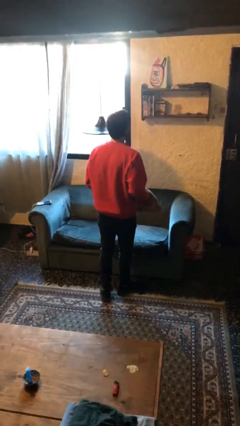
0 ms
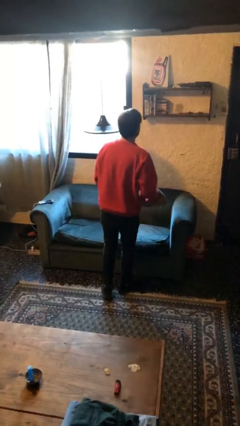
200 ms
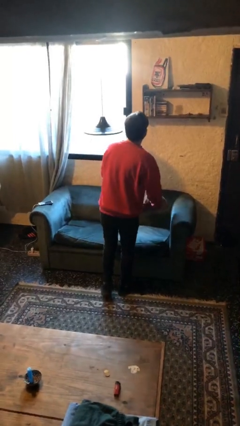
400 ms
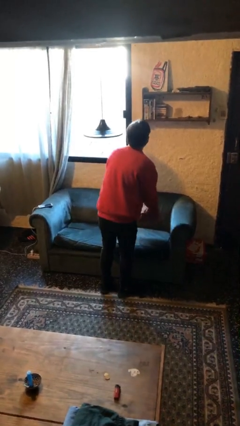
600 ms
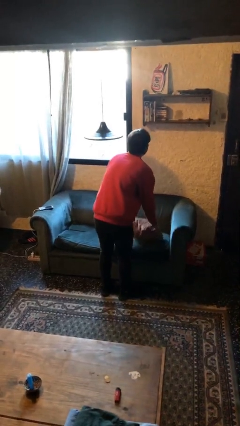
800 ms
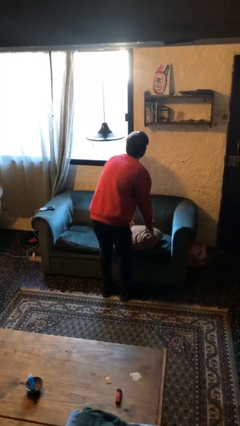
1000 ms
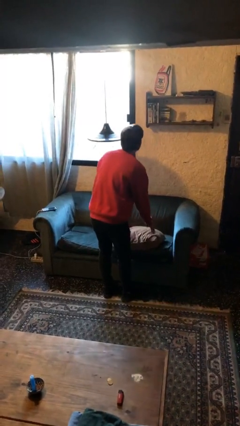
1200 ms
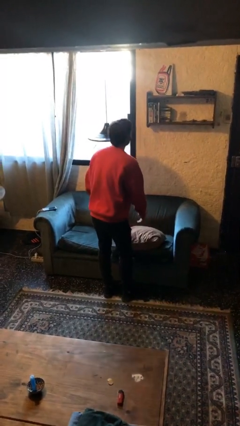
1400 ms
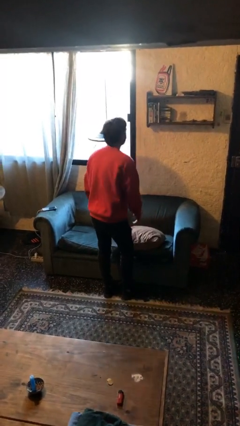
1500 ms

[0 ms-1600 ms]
person puts down object on couch

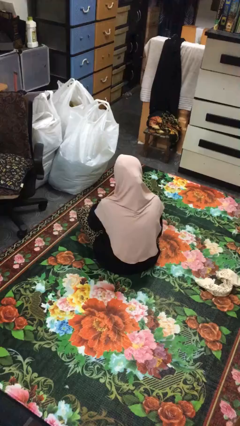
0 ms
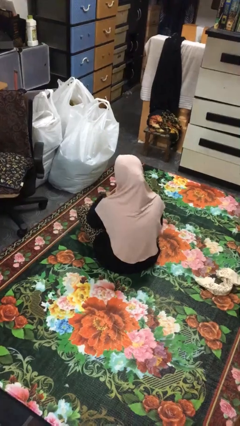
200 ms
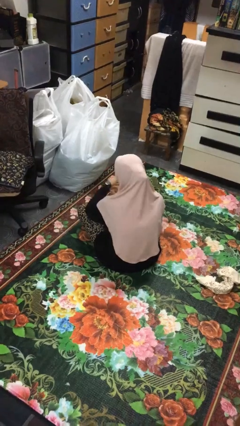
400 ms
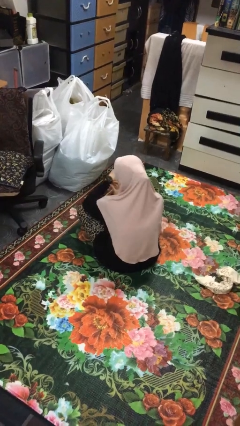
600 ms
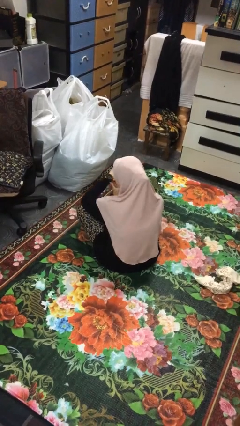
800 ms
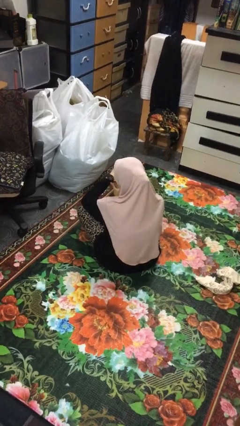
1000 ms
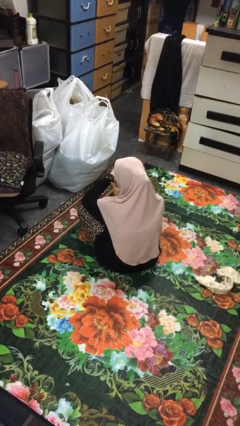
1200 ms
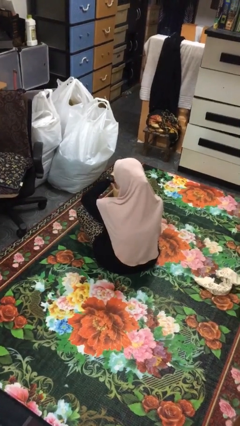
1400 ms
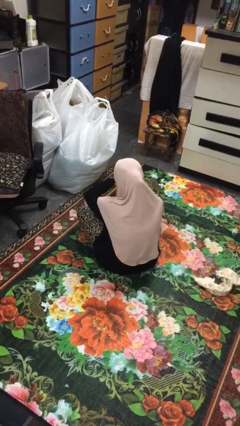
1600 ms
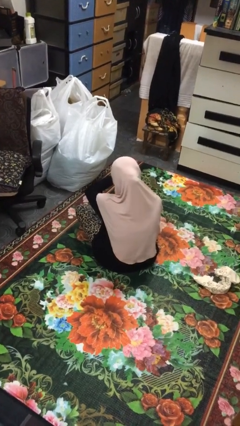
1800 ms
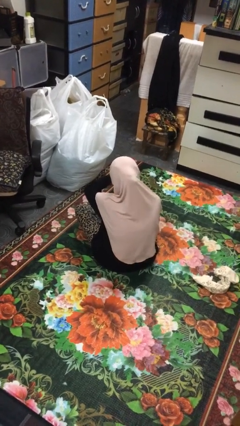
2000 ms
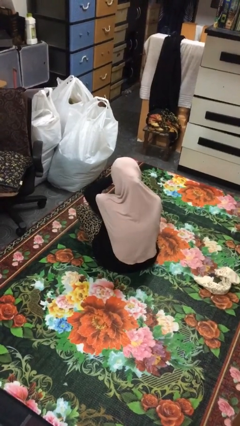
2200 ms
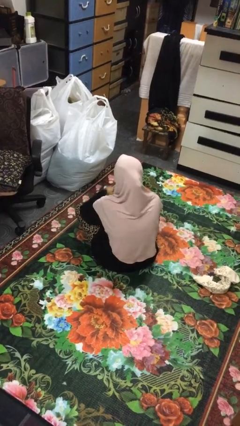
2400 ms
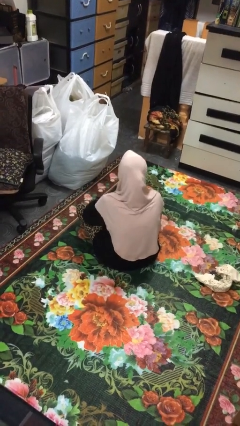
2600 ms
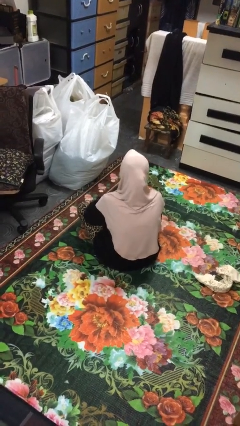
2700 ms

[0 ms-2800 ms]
person looks at wristwatch

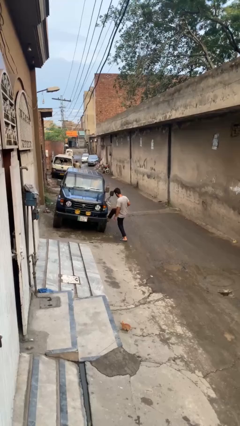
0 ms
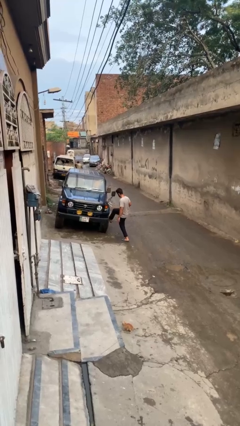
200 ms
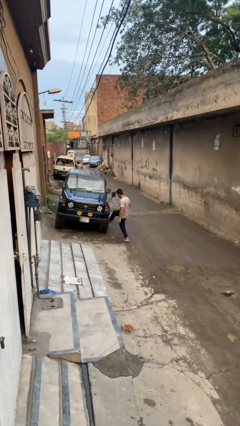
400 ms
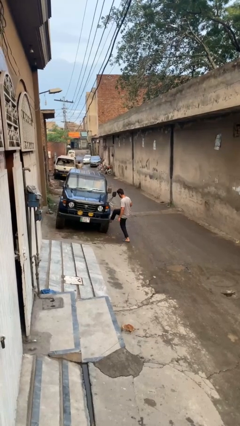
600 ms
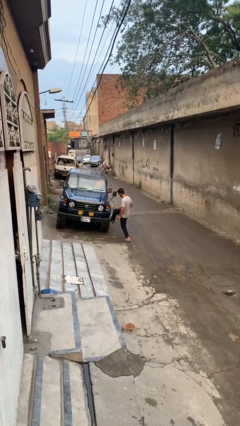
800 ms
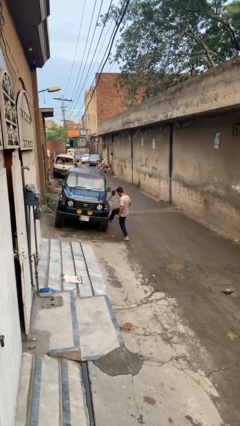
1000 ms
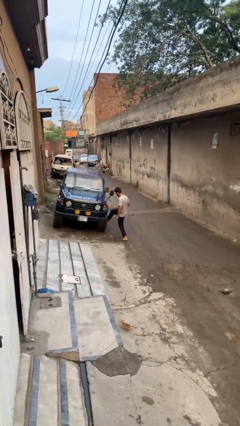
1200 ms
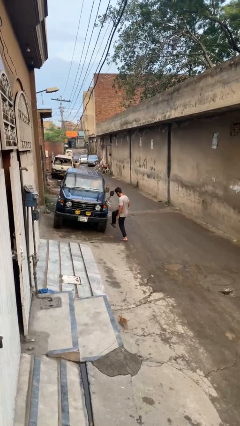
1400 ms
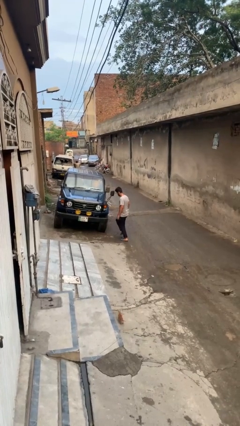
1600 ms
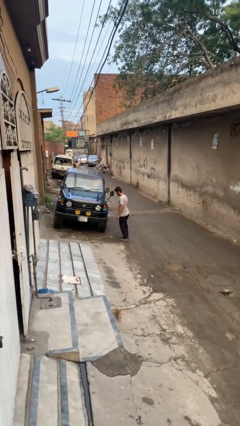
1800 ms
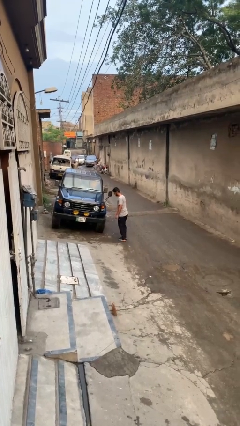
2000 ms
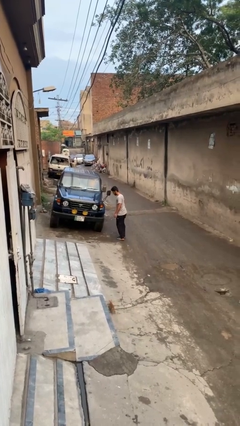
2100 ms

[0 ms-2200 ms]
person kicks car tires

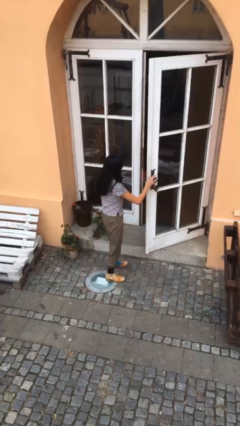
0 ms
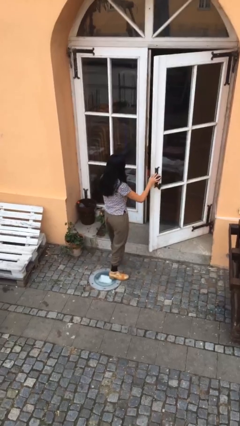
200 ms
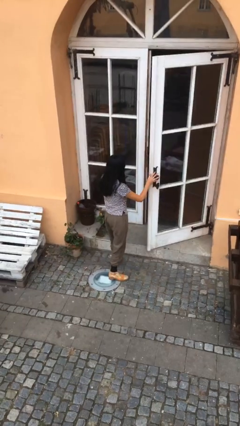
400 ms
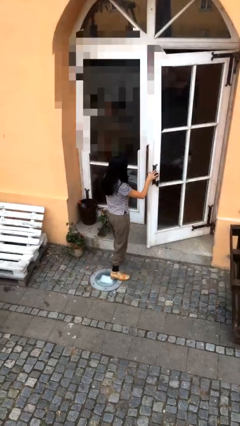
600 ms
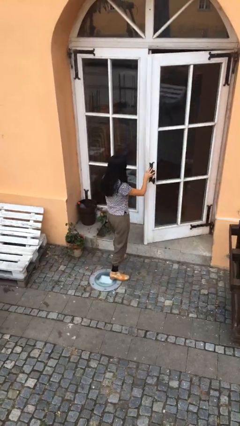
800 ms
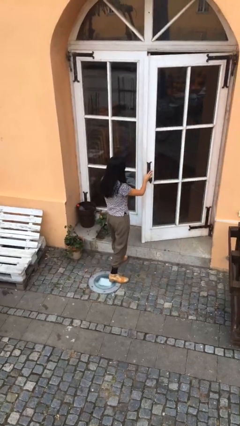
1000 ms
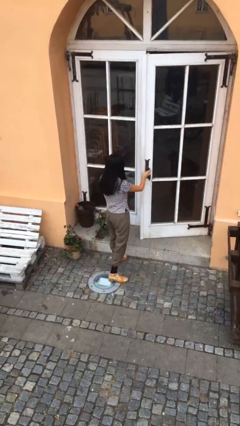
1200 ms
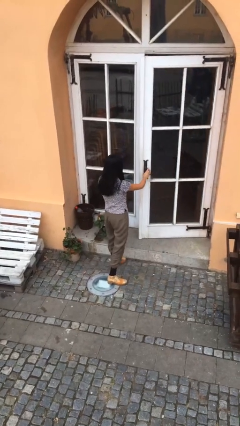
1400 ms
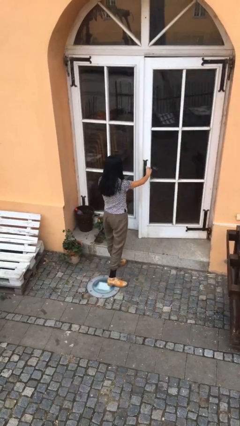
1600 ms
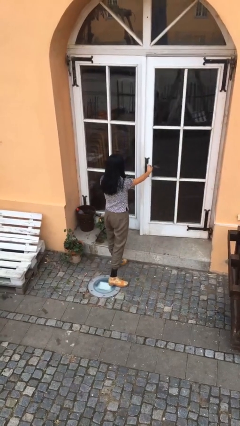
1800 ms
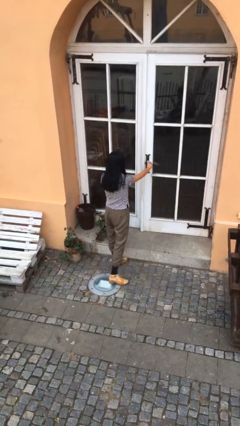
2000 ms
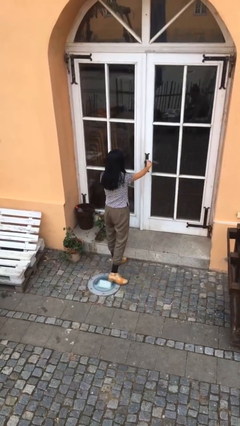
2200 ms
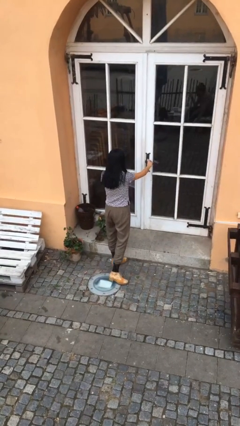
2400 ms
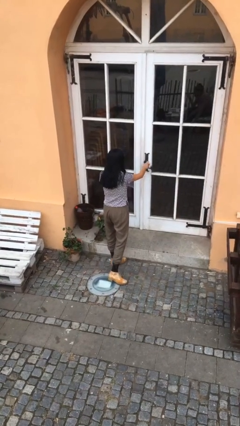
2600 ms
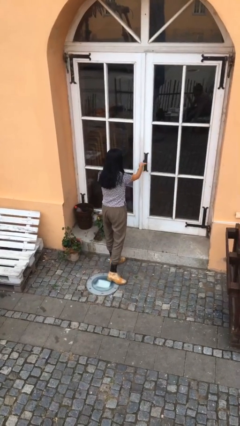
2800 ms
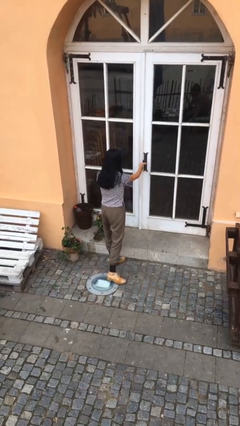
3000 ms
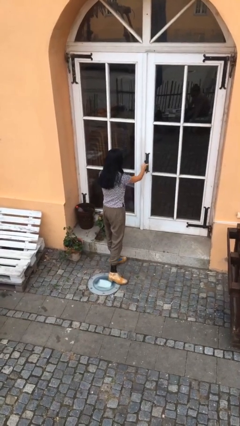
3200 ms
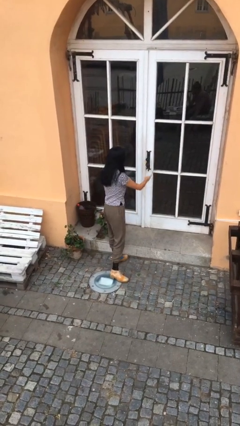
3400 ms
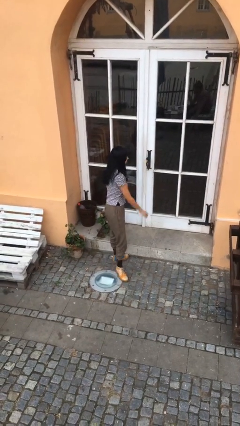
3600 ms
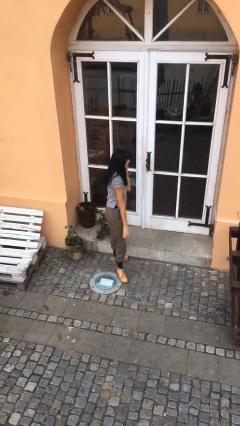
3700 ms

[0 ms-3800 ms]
person closes facility door

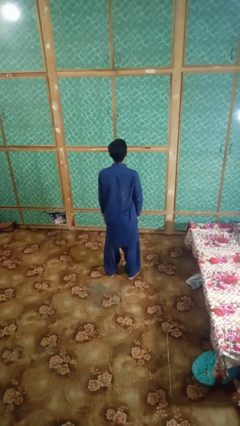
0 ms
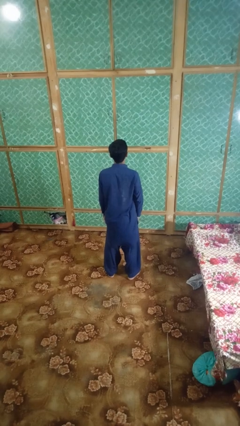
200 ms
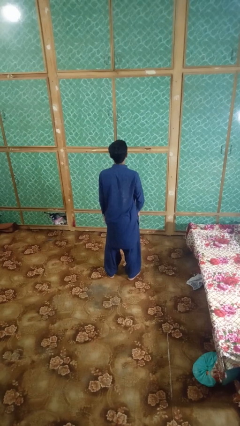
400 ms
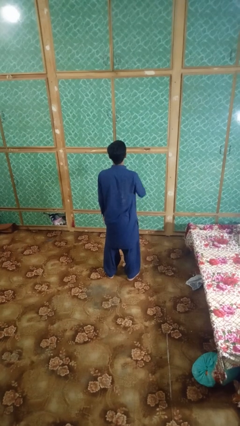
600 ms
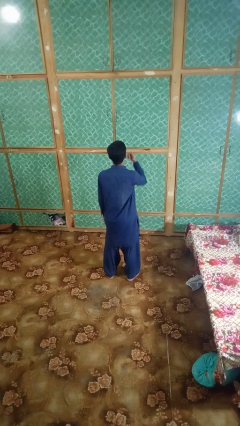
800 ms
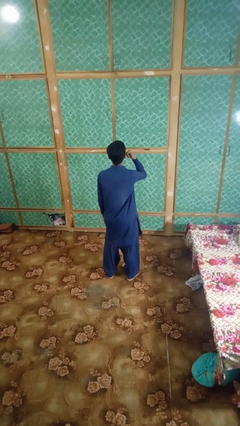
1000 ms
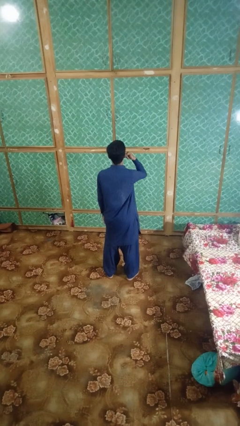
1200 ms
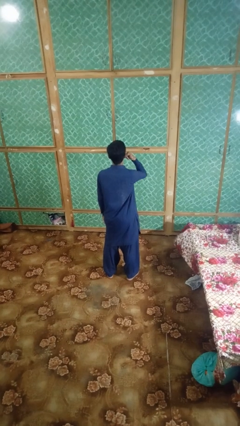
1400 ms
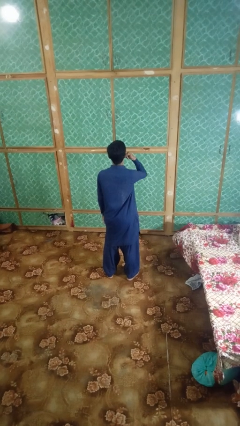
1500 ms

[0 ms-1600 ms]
person gestures call me

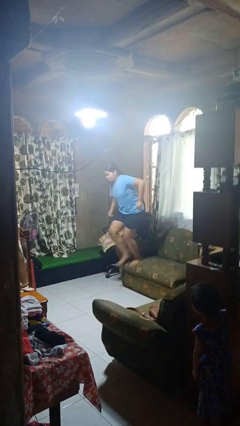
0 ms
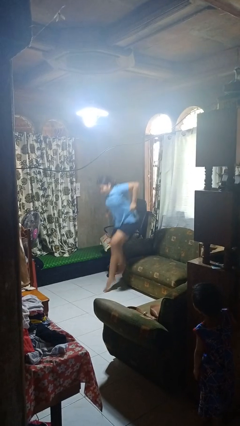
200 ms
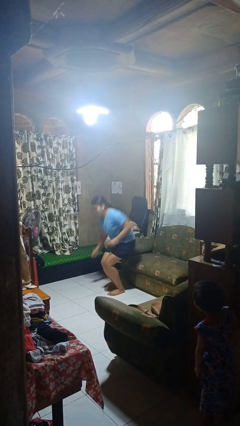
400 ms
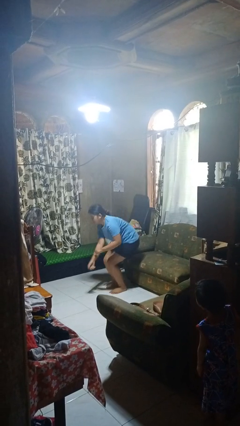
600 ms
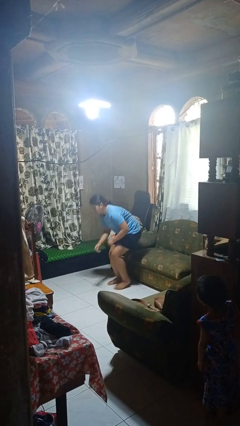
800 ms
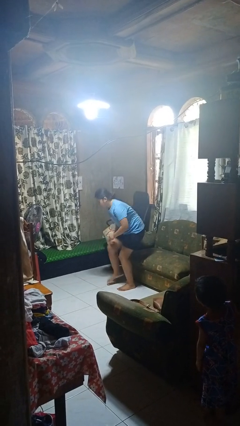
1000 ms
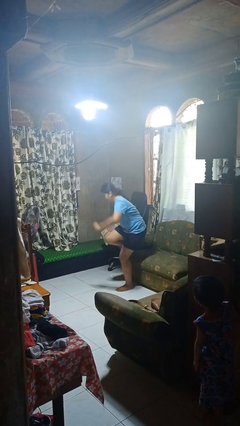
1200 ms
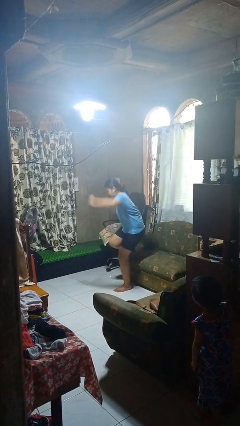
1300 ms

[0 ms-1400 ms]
person jumps on couch

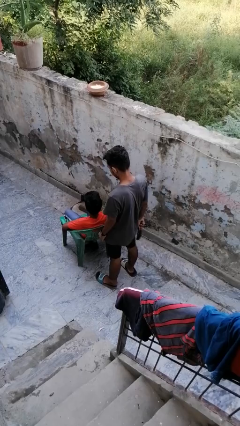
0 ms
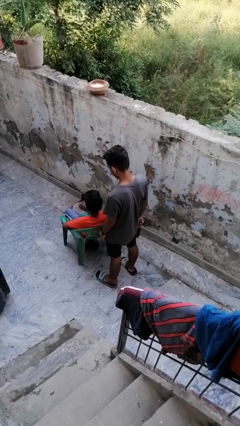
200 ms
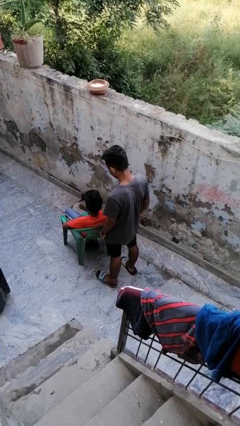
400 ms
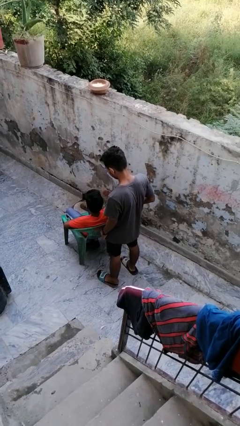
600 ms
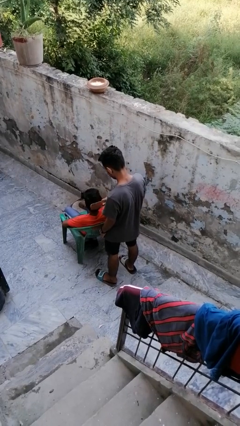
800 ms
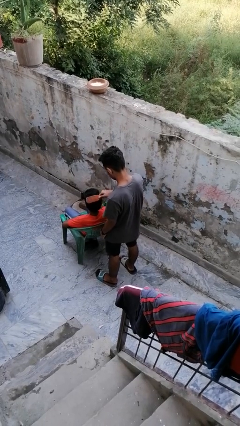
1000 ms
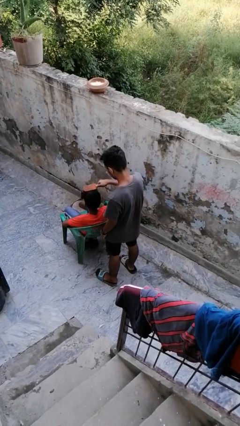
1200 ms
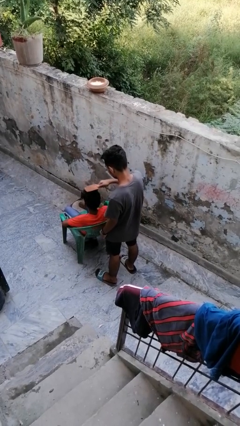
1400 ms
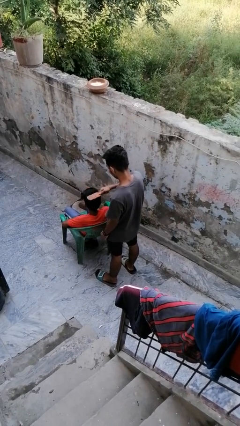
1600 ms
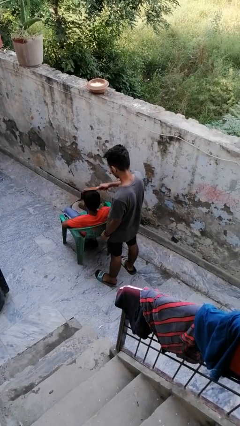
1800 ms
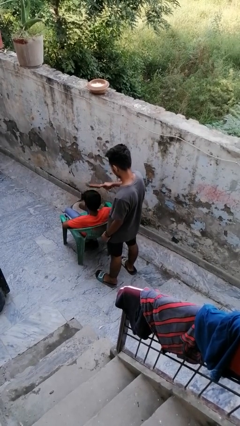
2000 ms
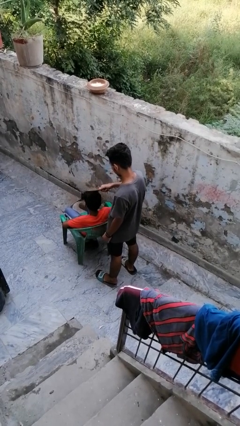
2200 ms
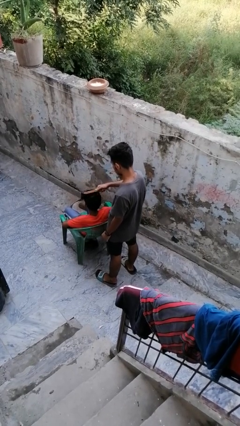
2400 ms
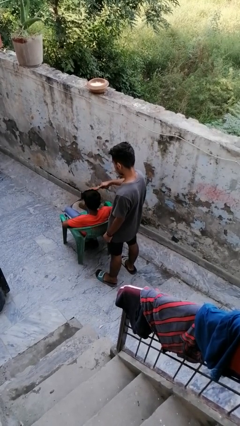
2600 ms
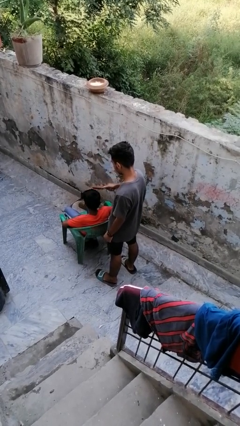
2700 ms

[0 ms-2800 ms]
person brushes hair of person

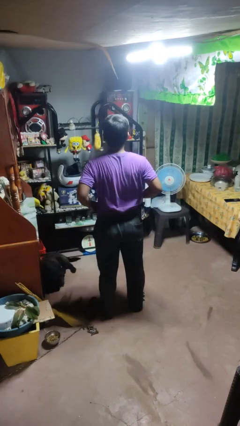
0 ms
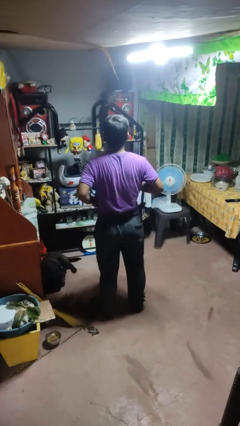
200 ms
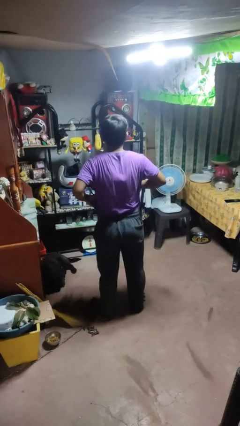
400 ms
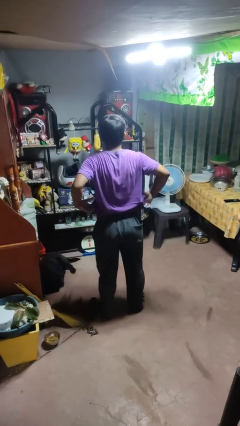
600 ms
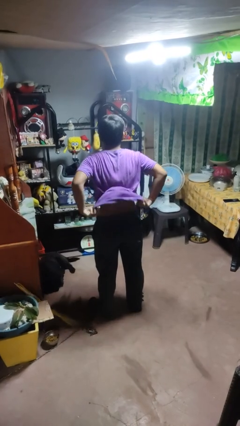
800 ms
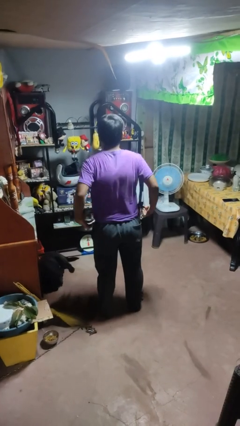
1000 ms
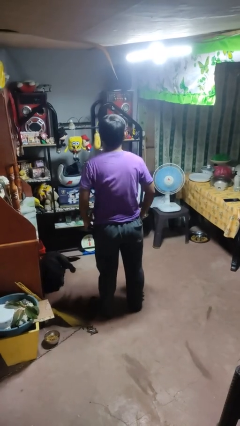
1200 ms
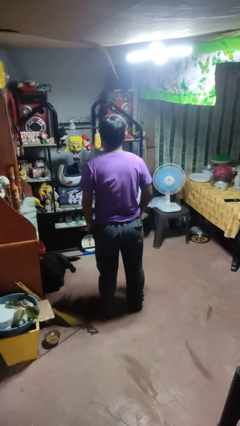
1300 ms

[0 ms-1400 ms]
person untucks shirt
